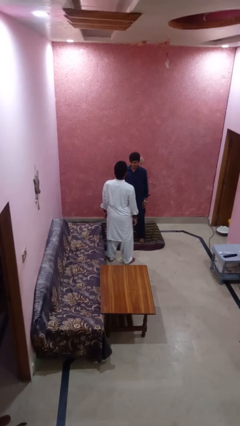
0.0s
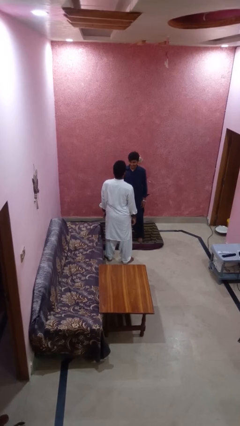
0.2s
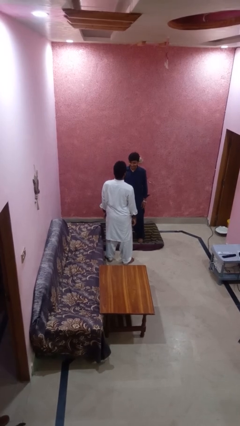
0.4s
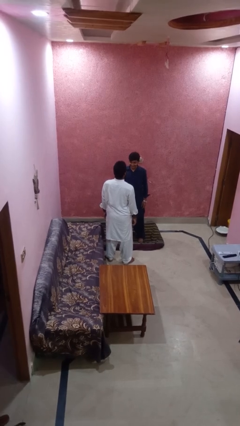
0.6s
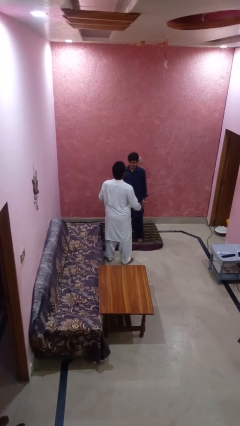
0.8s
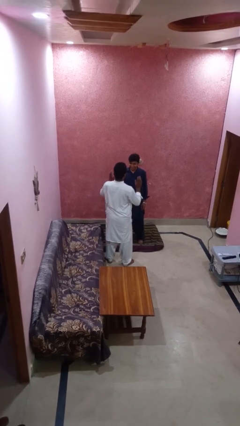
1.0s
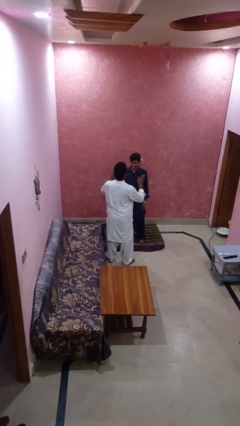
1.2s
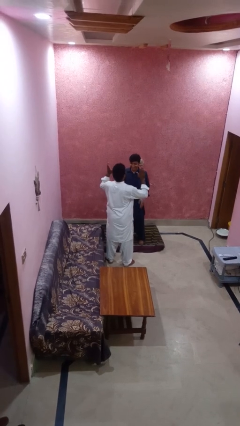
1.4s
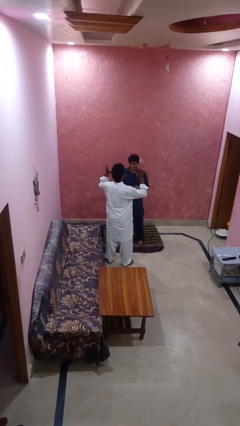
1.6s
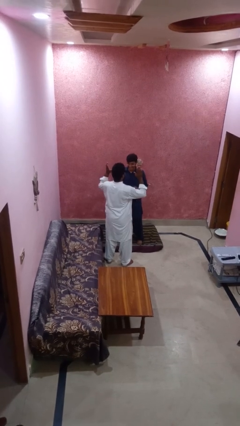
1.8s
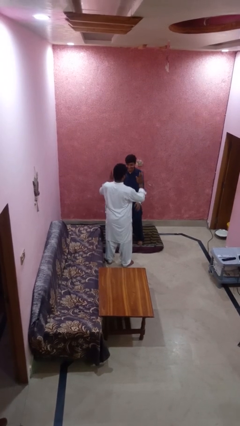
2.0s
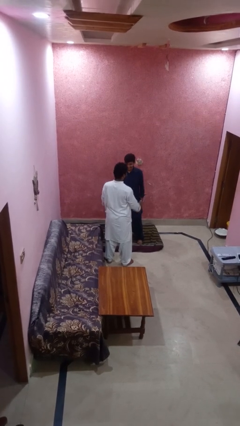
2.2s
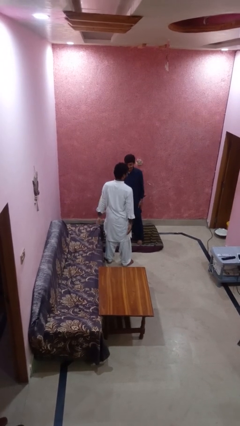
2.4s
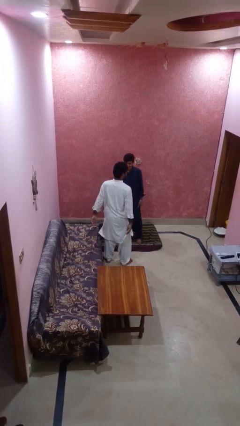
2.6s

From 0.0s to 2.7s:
person laughs with person

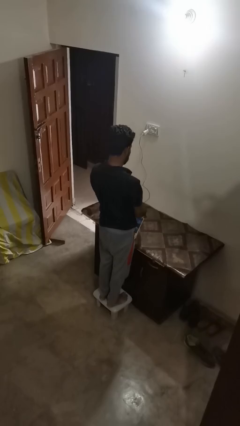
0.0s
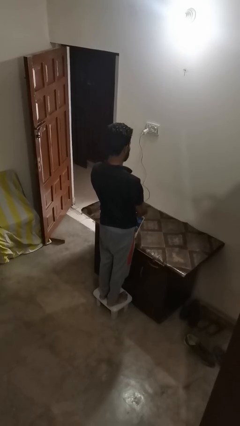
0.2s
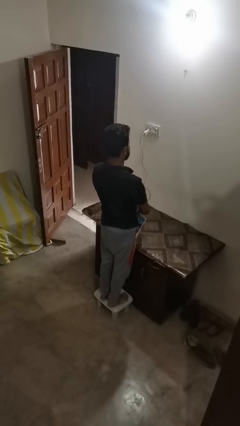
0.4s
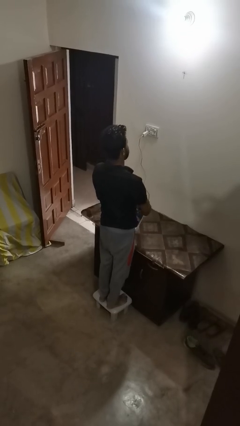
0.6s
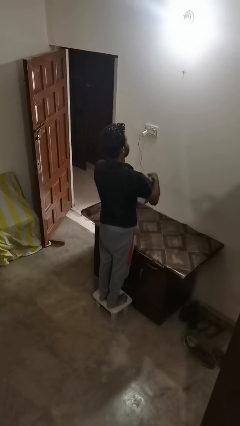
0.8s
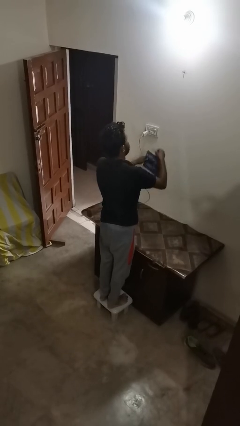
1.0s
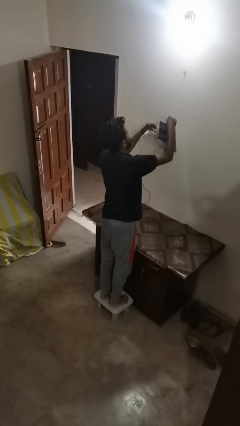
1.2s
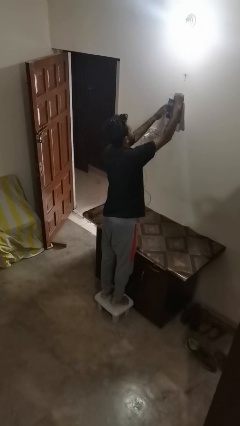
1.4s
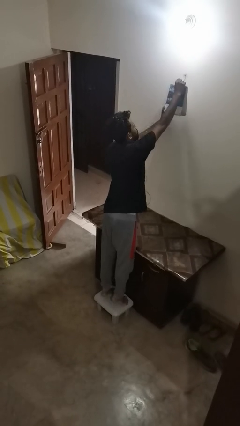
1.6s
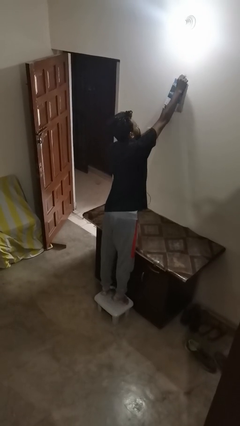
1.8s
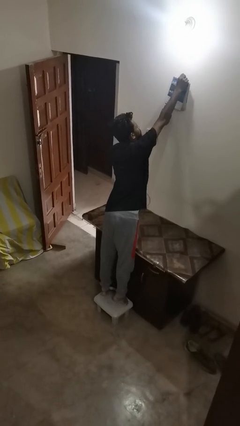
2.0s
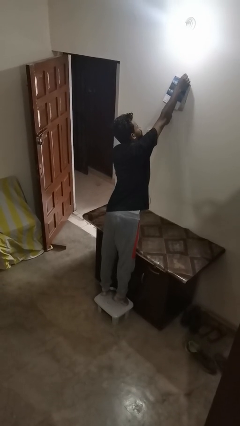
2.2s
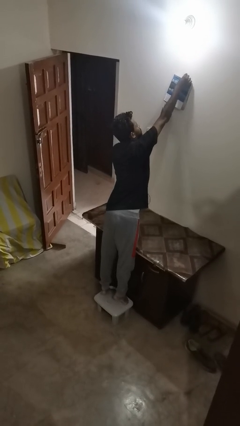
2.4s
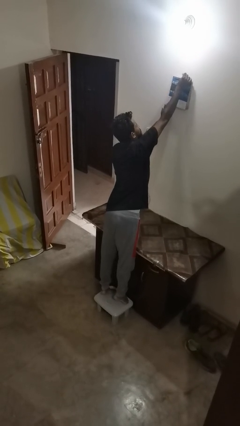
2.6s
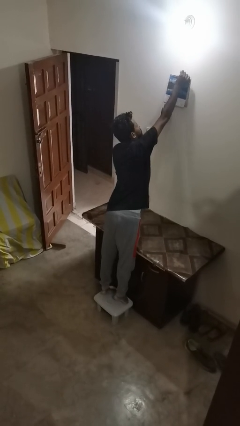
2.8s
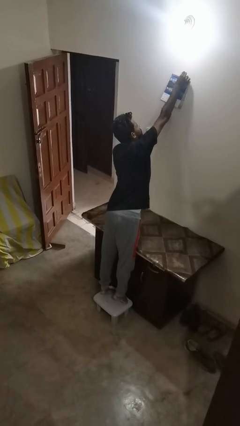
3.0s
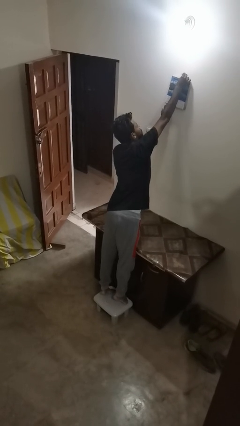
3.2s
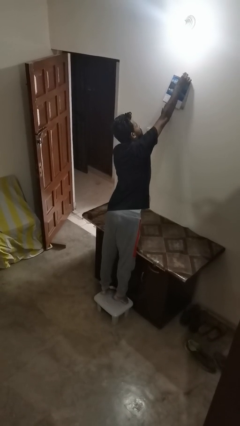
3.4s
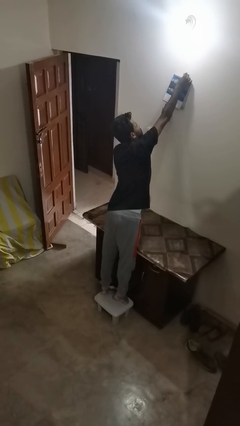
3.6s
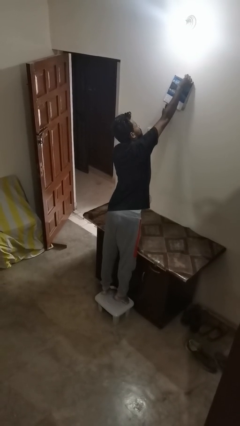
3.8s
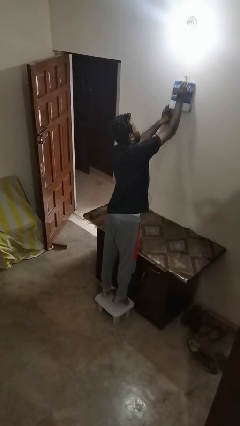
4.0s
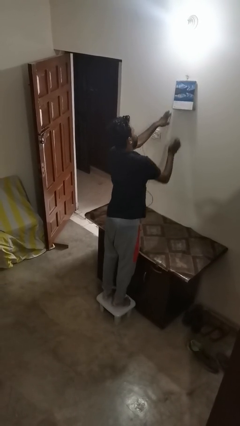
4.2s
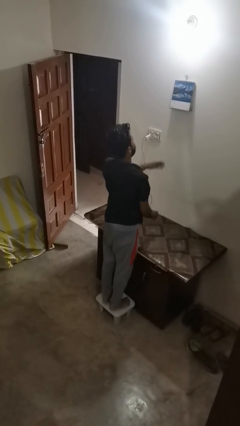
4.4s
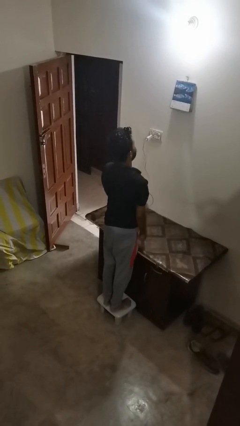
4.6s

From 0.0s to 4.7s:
person puts up picture frame

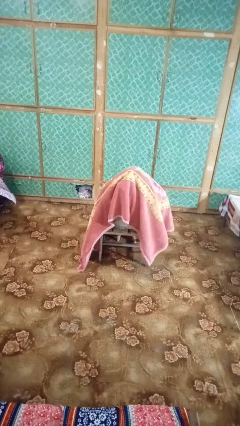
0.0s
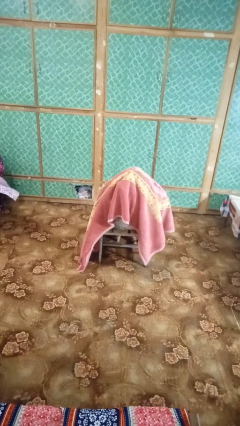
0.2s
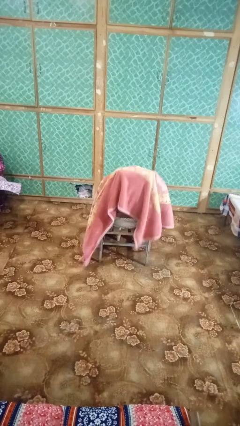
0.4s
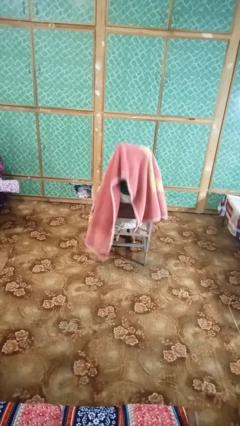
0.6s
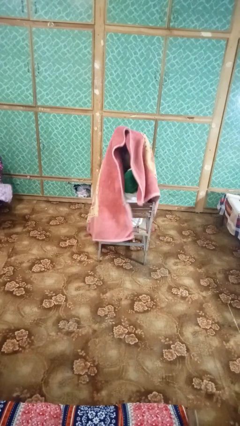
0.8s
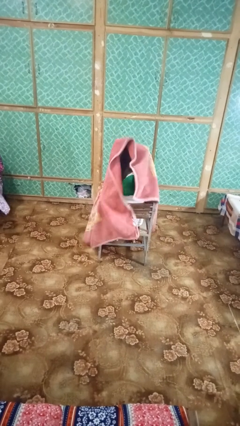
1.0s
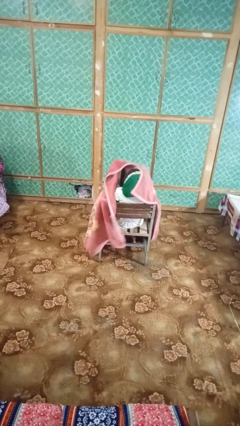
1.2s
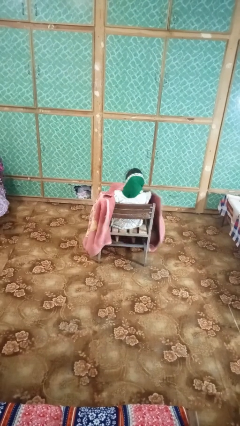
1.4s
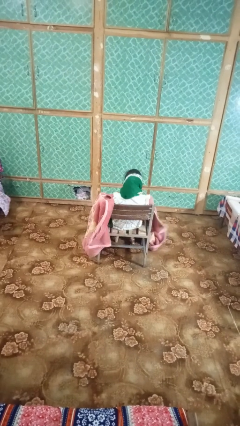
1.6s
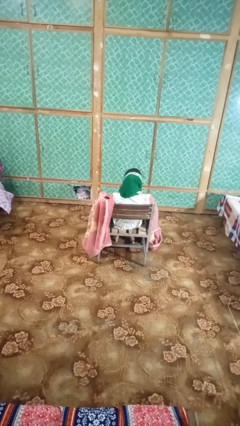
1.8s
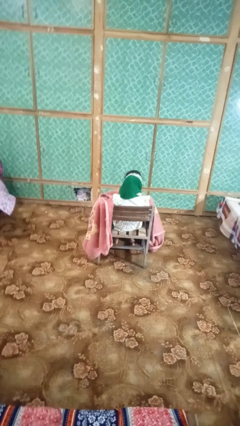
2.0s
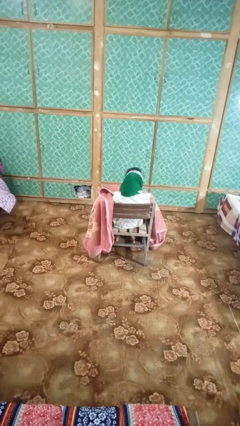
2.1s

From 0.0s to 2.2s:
person uncovers with blanket

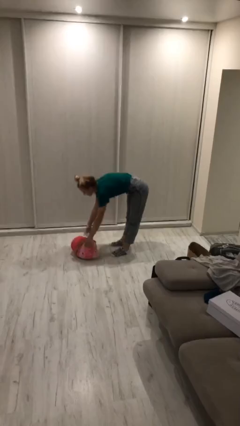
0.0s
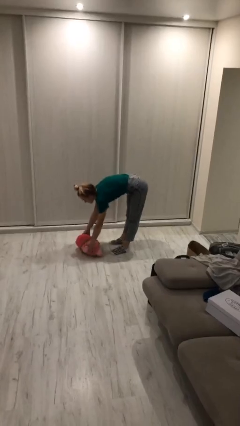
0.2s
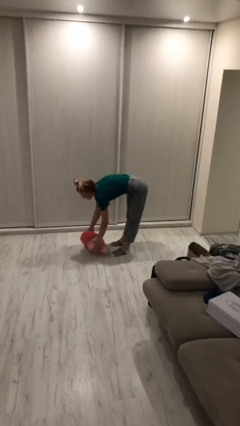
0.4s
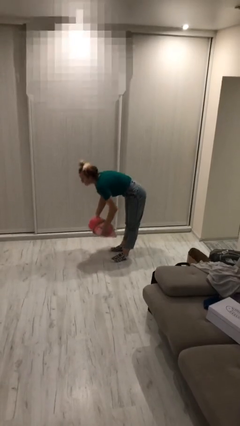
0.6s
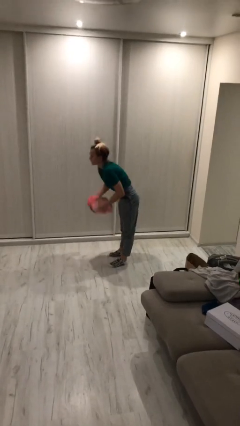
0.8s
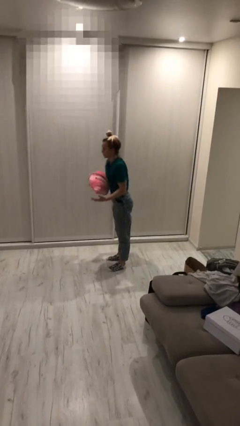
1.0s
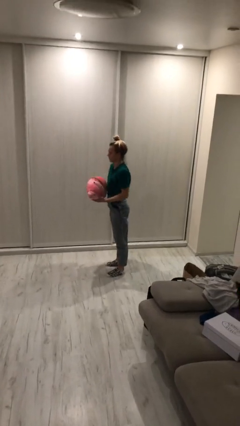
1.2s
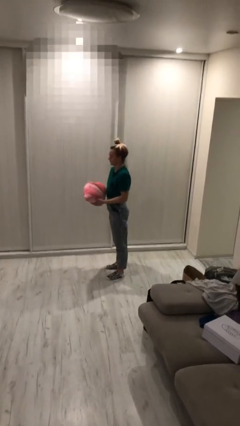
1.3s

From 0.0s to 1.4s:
person picks up object from floor

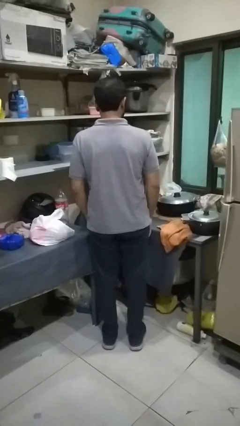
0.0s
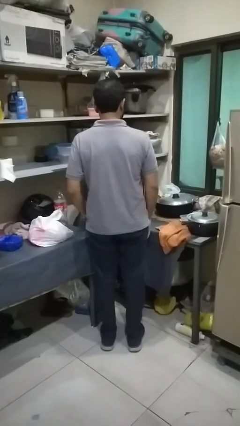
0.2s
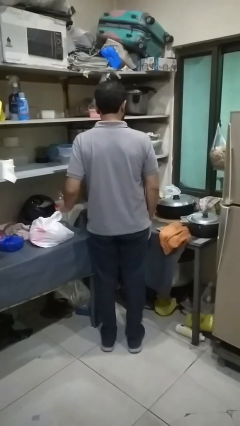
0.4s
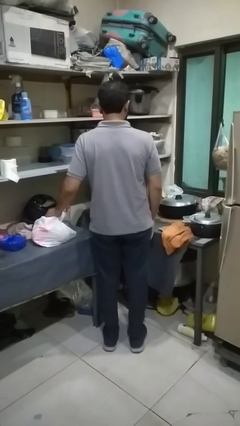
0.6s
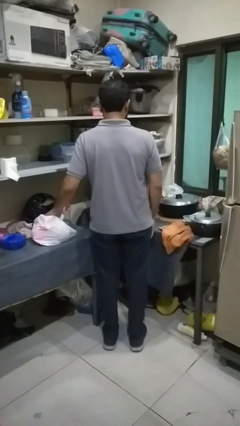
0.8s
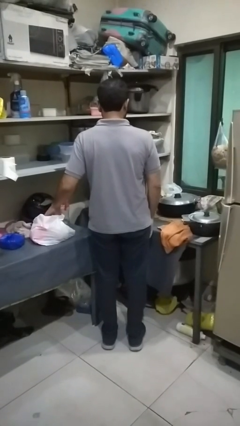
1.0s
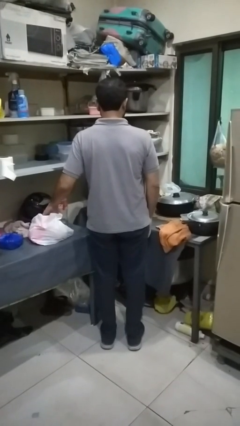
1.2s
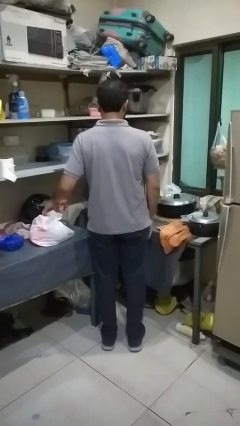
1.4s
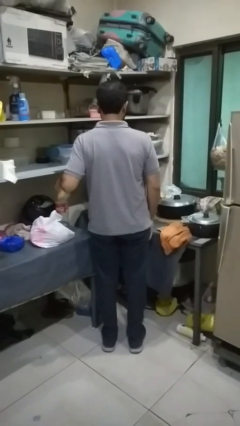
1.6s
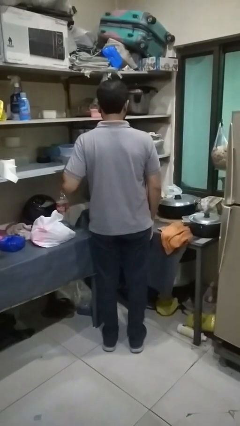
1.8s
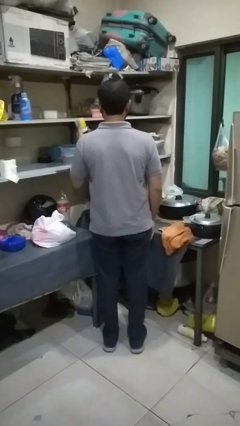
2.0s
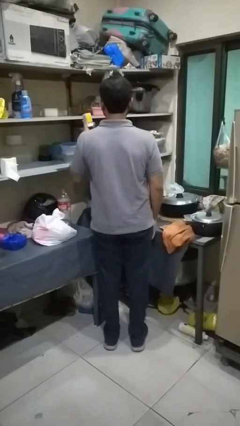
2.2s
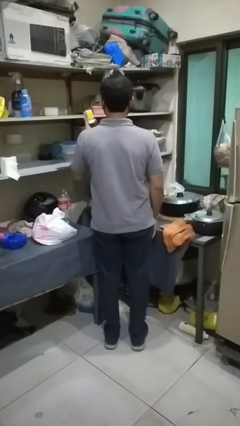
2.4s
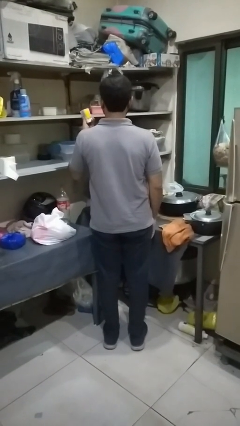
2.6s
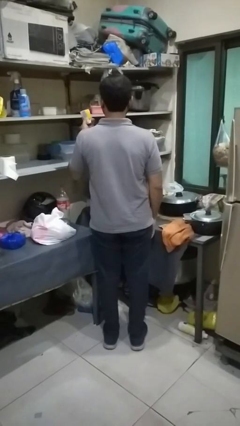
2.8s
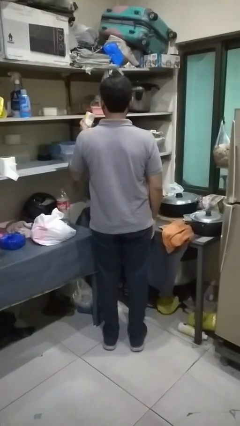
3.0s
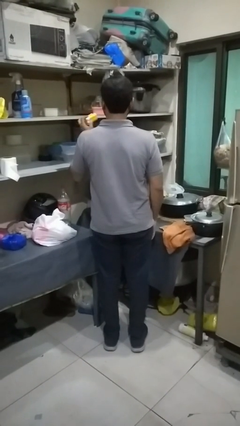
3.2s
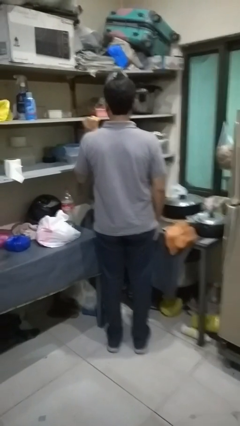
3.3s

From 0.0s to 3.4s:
person takes object from bag

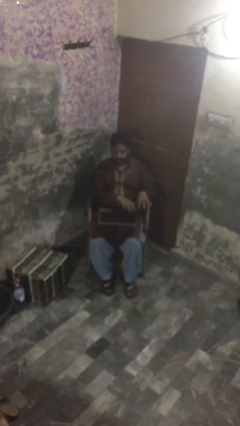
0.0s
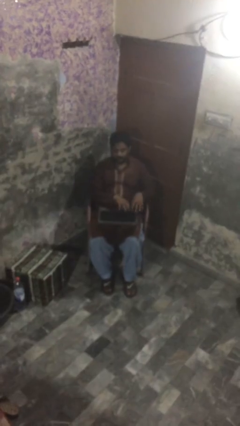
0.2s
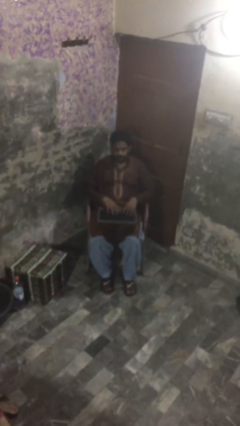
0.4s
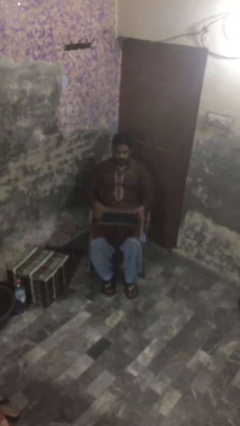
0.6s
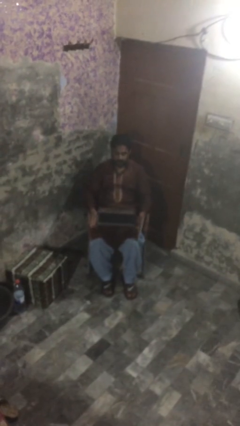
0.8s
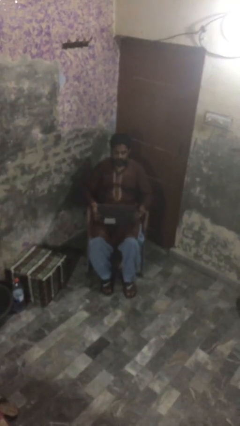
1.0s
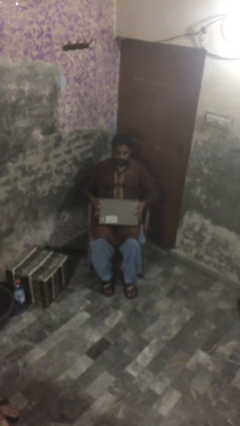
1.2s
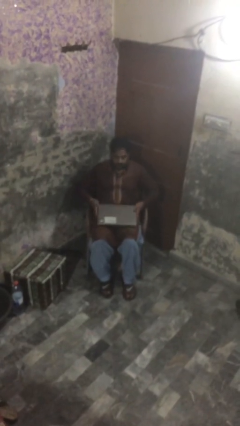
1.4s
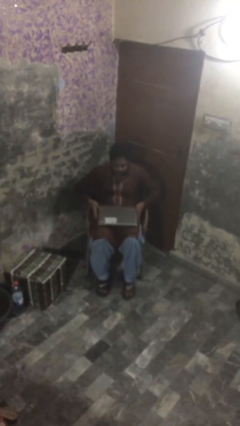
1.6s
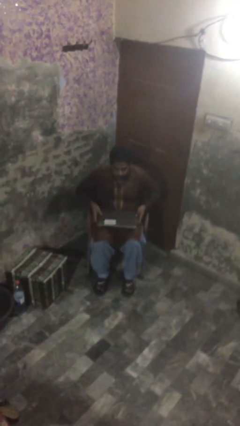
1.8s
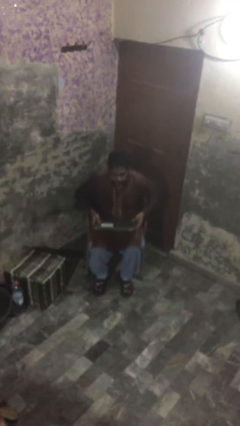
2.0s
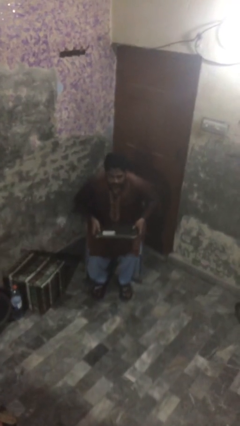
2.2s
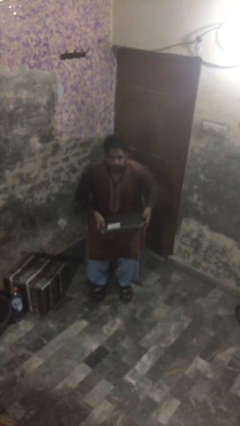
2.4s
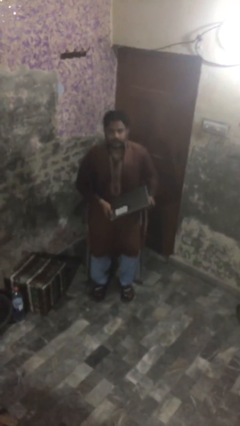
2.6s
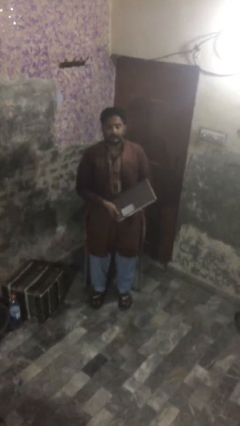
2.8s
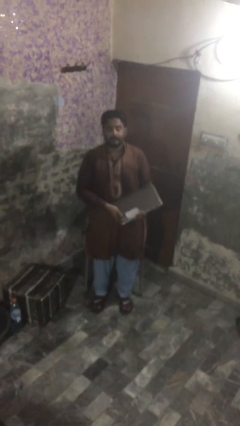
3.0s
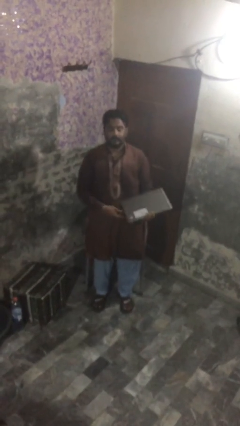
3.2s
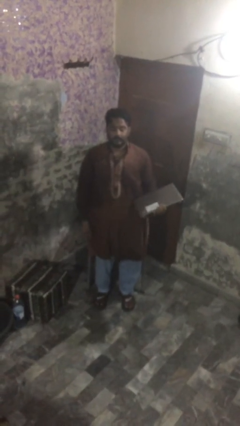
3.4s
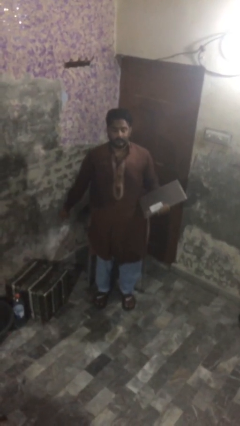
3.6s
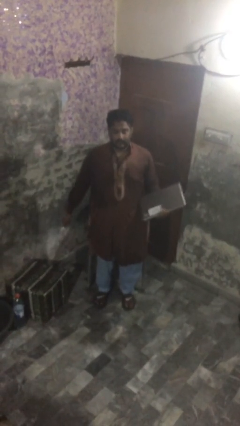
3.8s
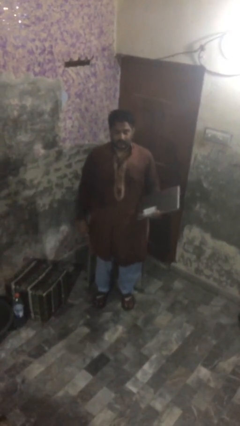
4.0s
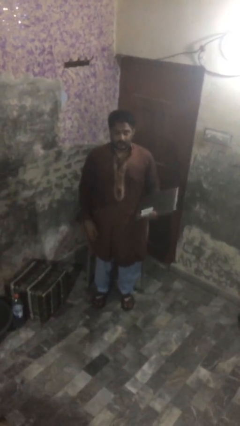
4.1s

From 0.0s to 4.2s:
person stands up
